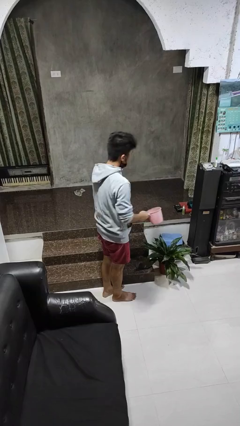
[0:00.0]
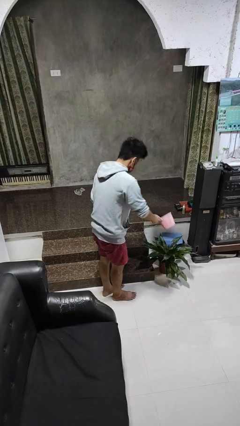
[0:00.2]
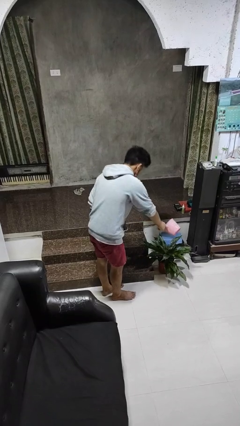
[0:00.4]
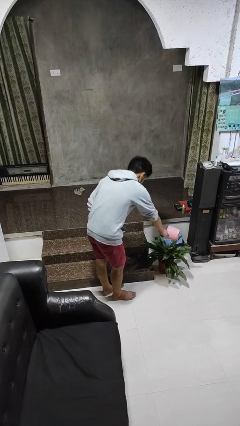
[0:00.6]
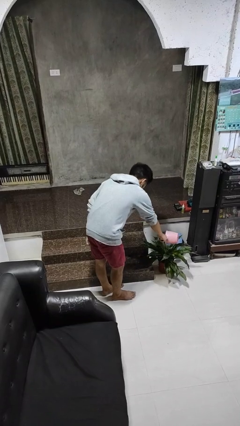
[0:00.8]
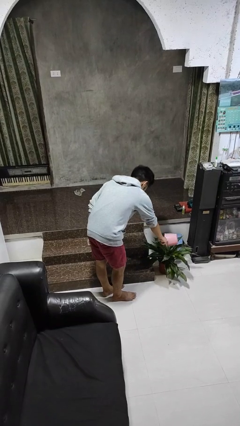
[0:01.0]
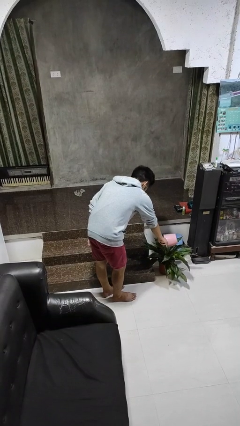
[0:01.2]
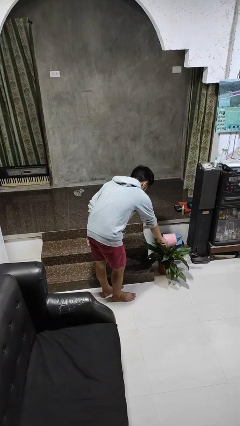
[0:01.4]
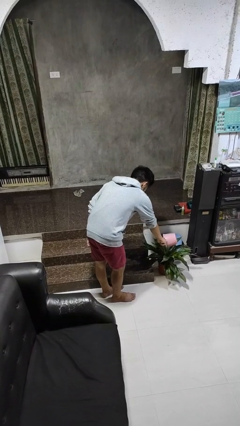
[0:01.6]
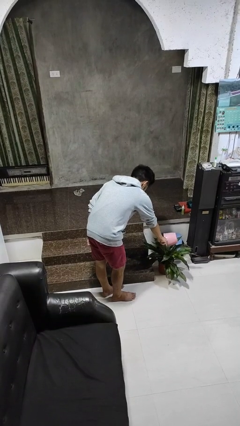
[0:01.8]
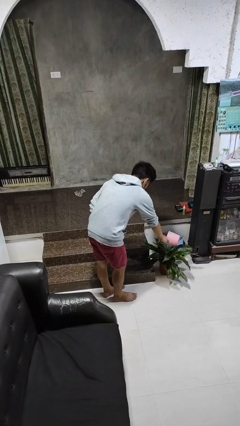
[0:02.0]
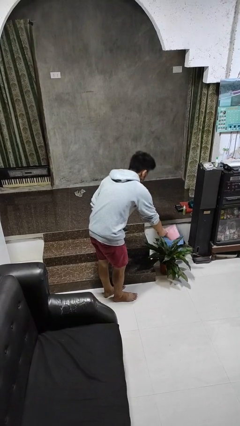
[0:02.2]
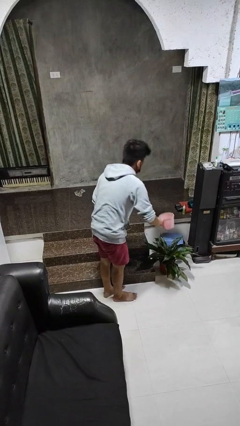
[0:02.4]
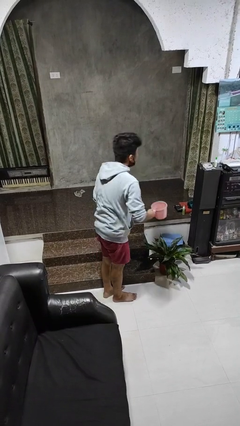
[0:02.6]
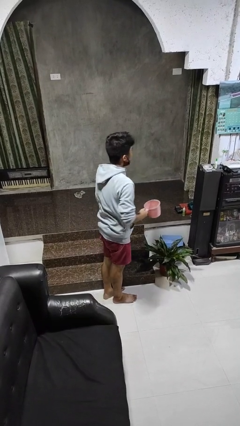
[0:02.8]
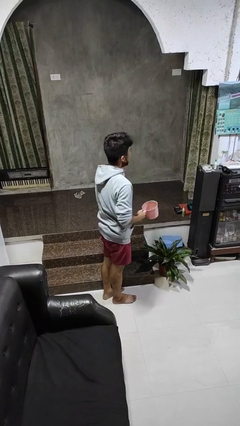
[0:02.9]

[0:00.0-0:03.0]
person waters houseplant

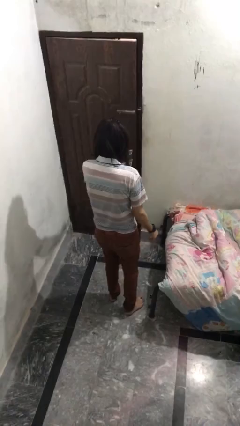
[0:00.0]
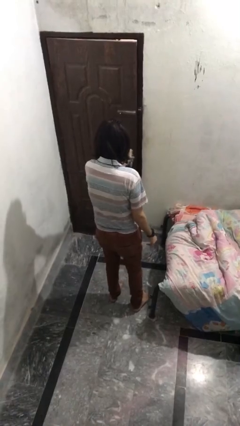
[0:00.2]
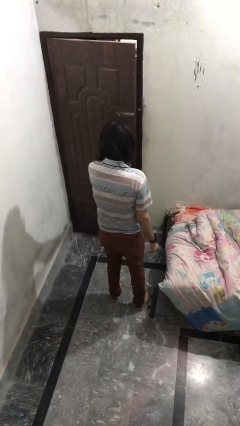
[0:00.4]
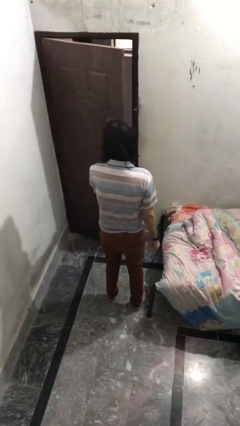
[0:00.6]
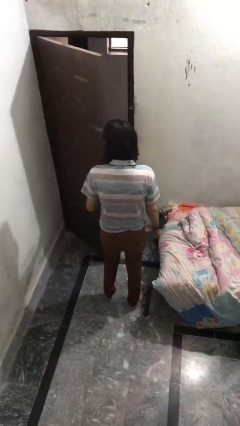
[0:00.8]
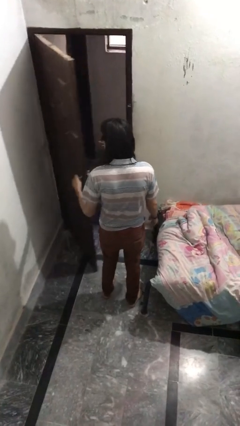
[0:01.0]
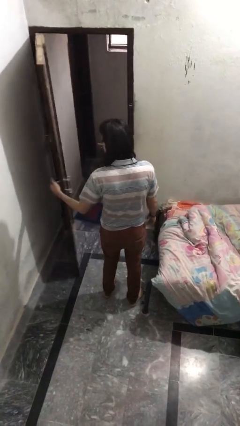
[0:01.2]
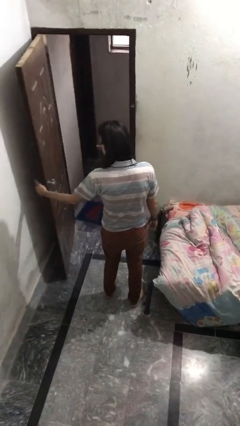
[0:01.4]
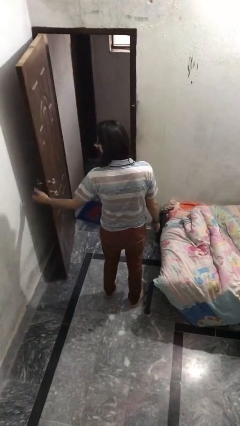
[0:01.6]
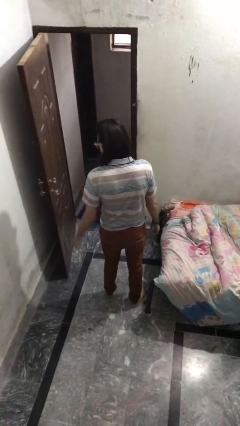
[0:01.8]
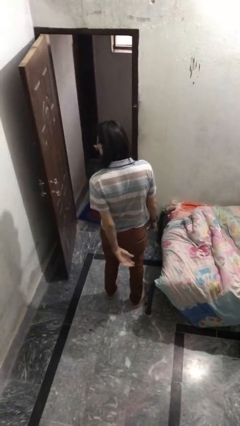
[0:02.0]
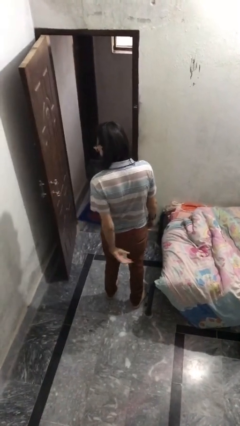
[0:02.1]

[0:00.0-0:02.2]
person opens facility door

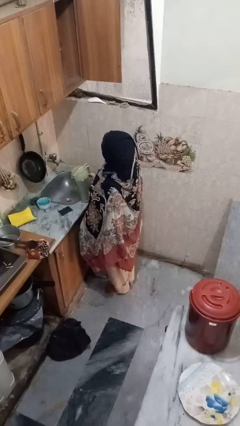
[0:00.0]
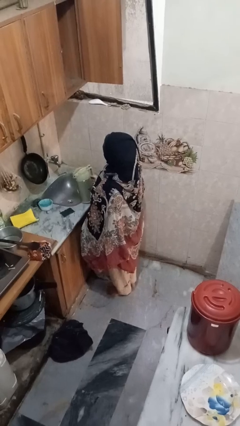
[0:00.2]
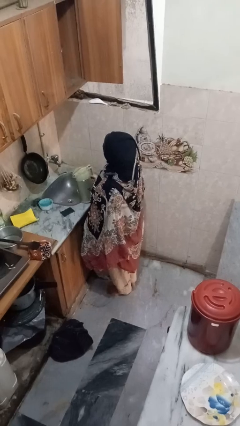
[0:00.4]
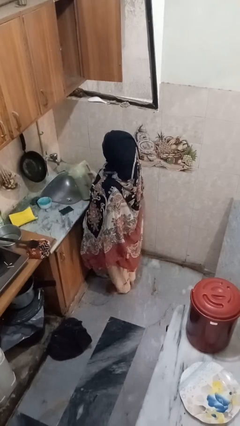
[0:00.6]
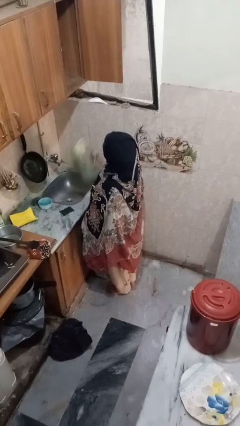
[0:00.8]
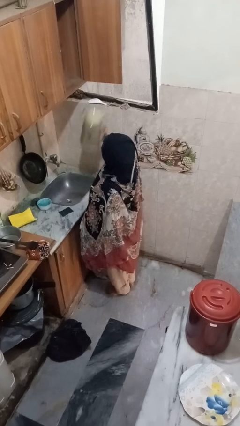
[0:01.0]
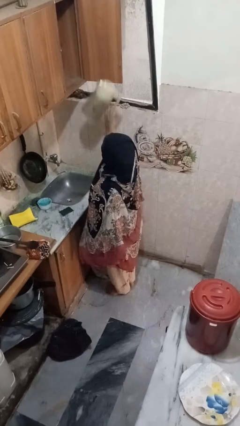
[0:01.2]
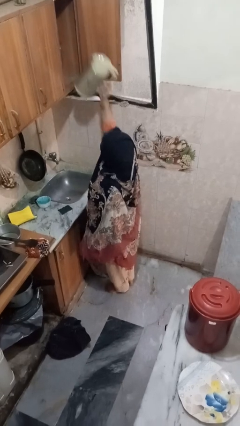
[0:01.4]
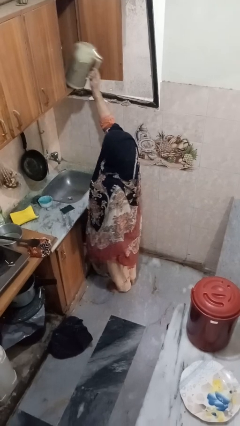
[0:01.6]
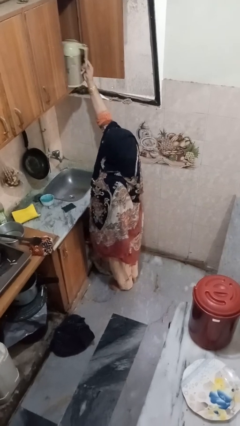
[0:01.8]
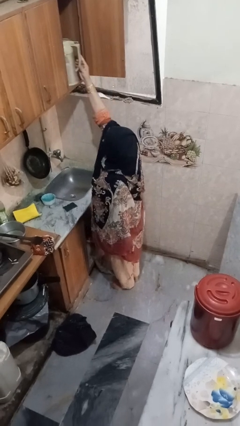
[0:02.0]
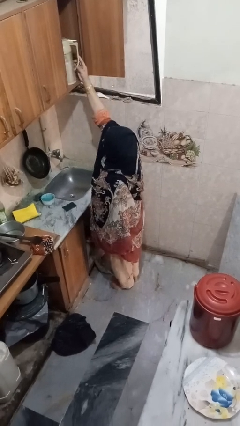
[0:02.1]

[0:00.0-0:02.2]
person takes object from cabinet

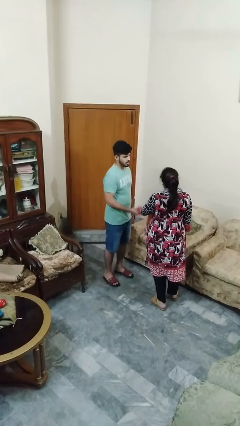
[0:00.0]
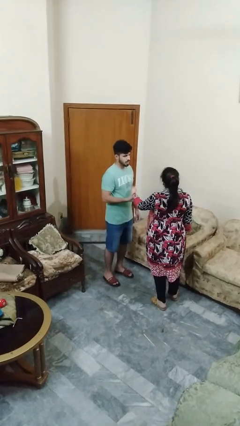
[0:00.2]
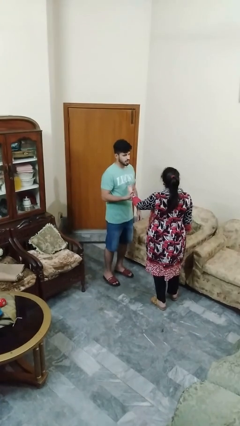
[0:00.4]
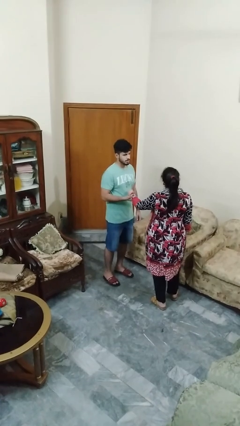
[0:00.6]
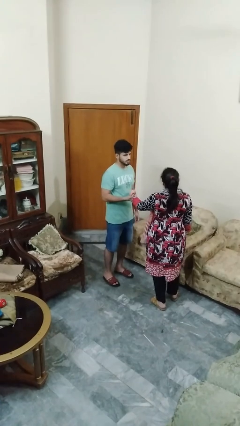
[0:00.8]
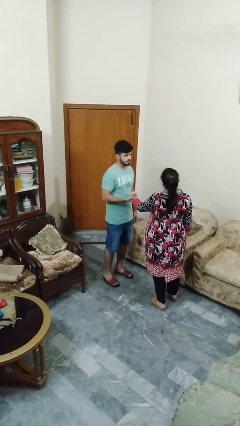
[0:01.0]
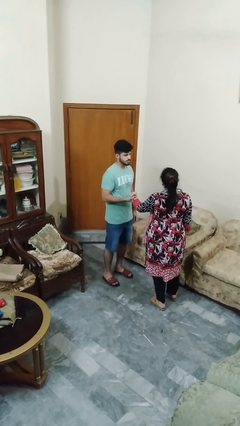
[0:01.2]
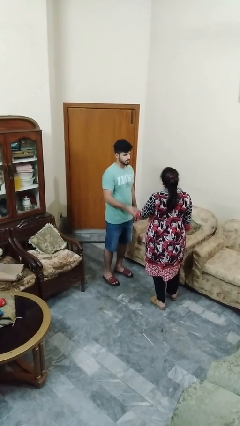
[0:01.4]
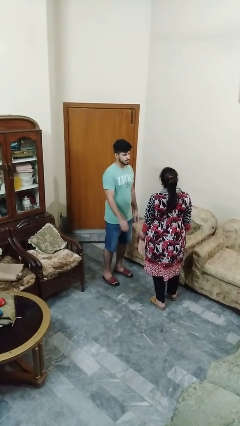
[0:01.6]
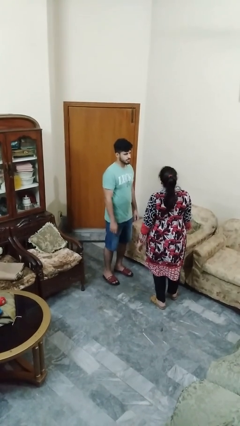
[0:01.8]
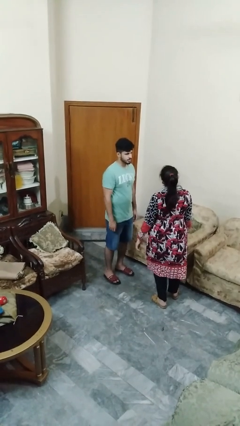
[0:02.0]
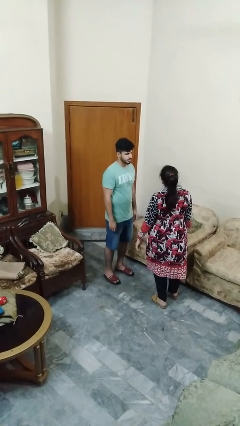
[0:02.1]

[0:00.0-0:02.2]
person grabs person by forearm

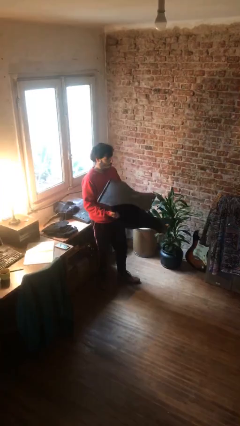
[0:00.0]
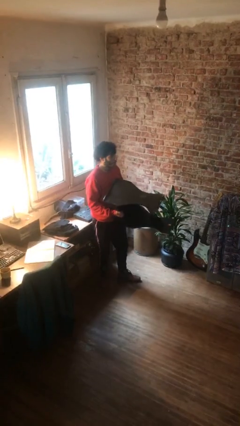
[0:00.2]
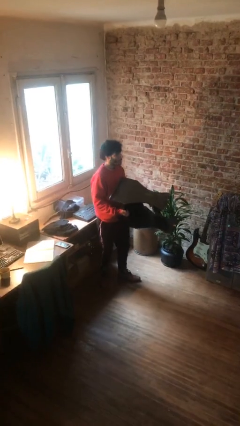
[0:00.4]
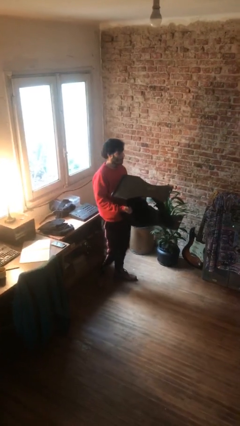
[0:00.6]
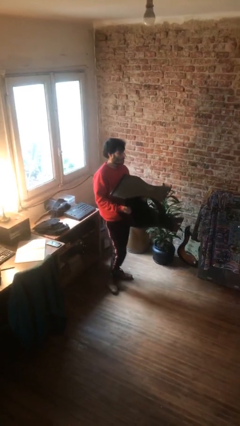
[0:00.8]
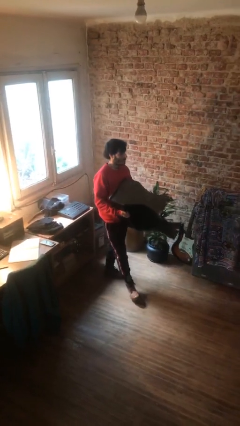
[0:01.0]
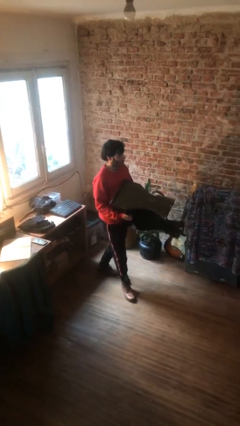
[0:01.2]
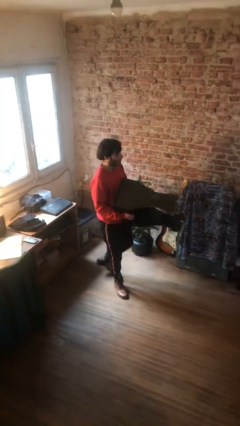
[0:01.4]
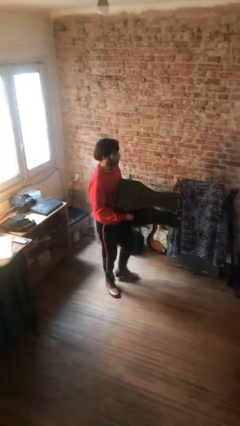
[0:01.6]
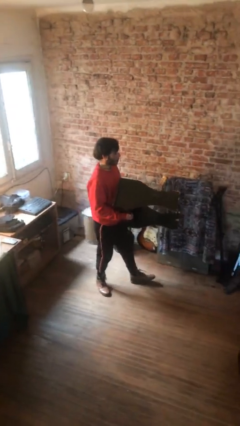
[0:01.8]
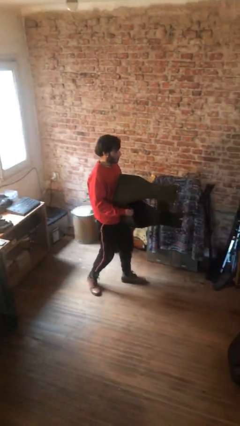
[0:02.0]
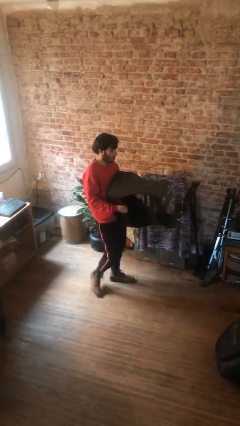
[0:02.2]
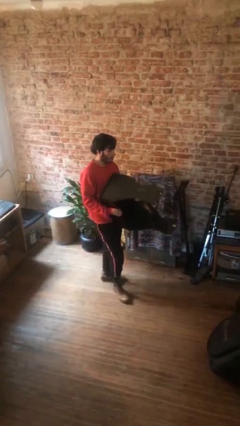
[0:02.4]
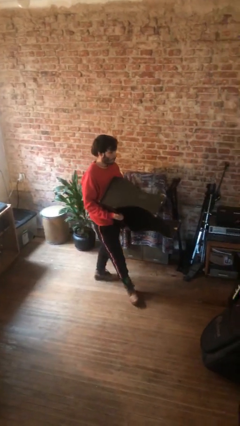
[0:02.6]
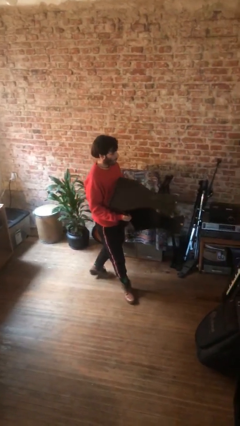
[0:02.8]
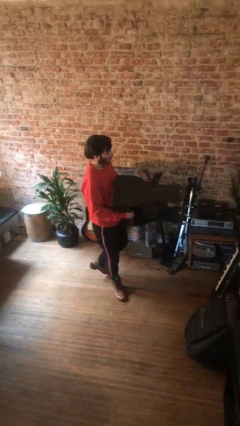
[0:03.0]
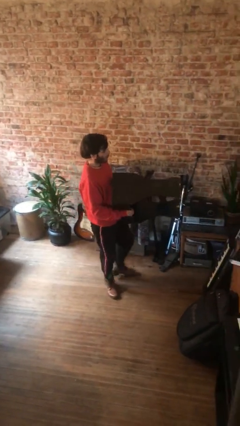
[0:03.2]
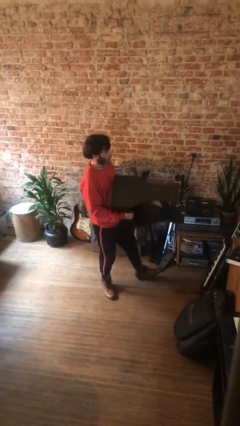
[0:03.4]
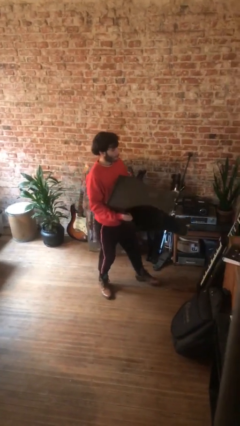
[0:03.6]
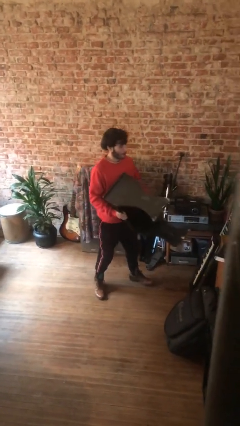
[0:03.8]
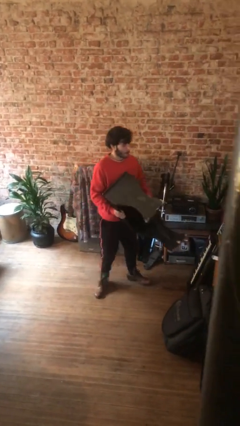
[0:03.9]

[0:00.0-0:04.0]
person carries furniture

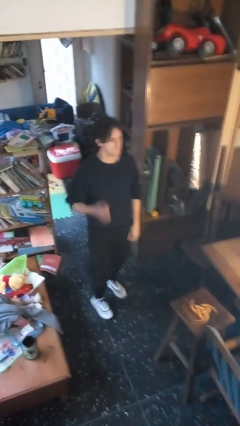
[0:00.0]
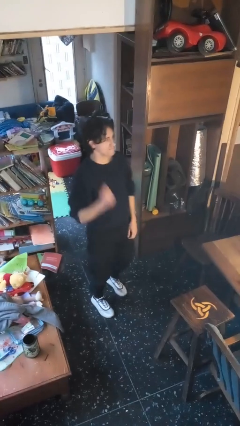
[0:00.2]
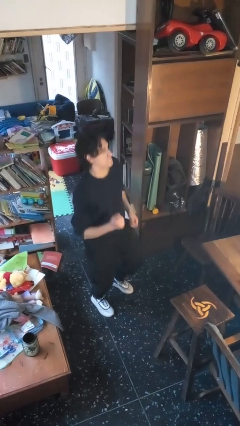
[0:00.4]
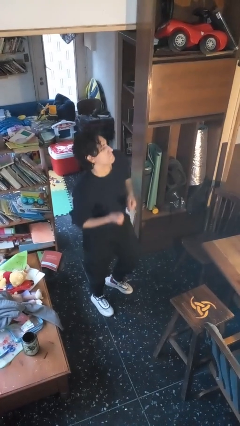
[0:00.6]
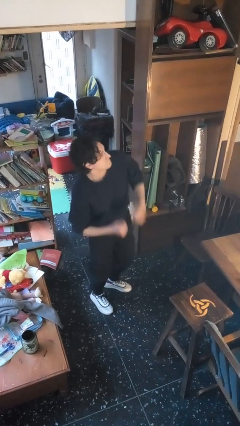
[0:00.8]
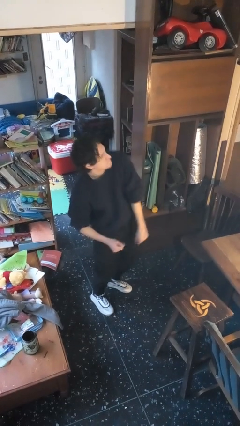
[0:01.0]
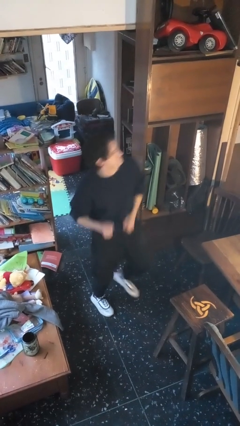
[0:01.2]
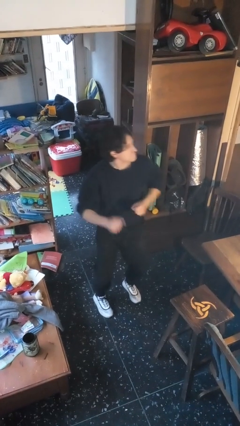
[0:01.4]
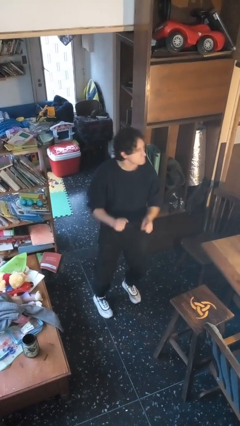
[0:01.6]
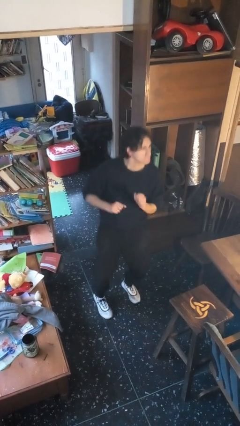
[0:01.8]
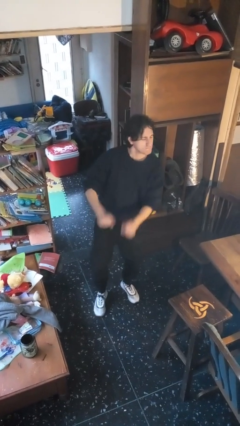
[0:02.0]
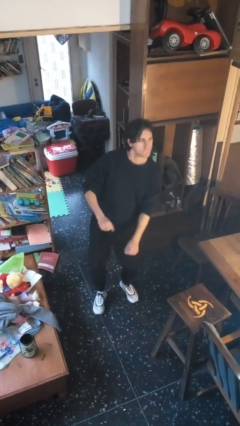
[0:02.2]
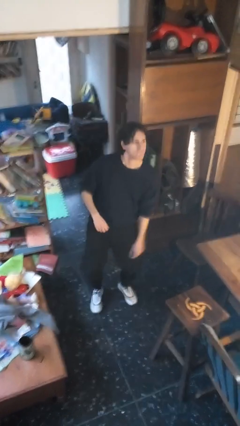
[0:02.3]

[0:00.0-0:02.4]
person dances in place

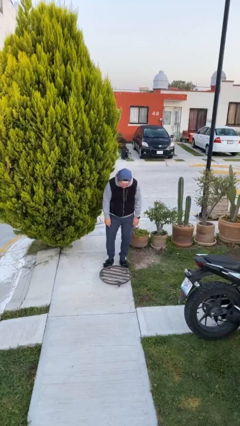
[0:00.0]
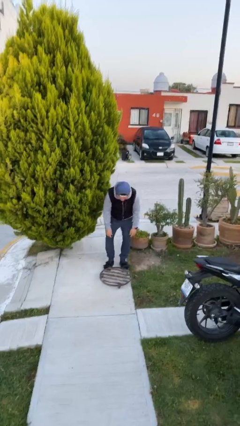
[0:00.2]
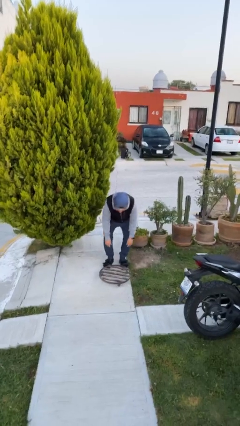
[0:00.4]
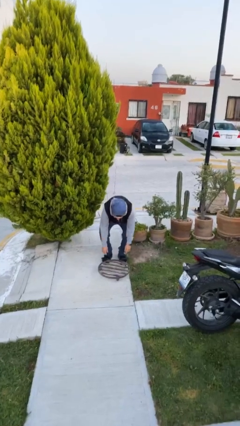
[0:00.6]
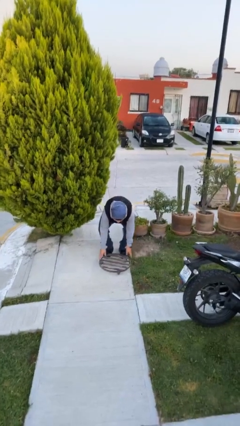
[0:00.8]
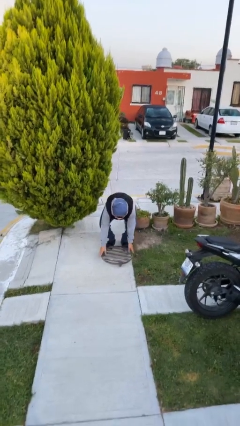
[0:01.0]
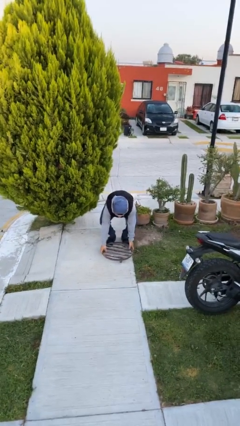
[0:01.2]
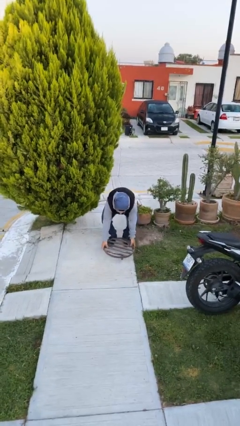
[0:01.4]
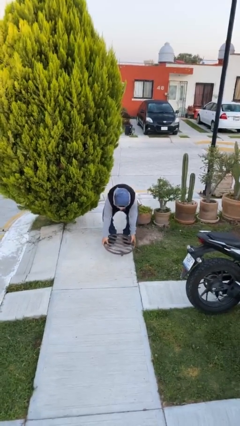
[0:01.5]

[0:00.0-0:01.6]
person picks up object from floor
